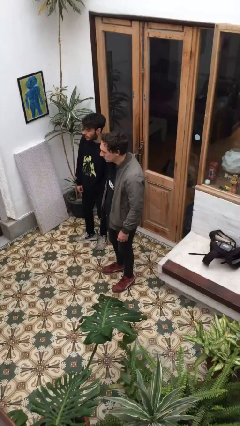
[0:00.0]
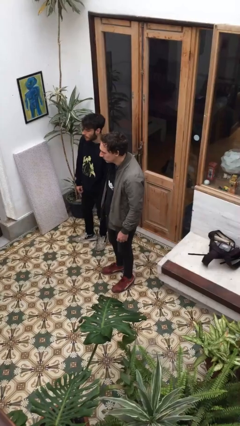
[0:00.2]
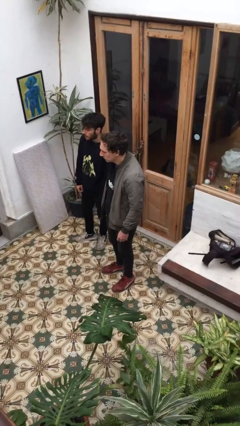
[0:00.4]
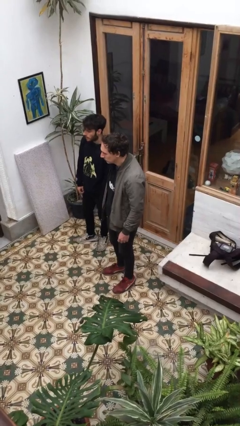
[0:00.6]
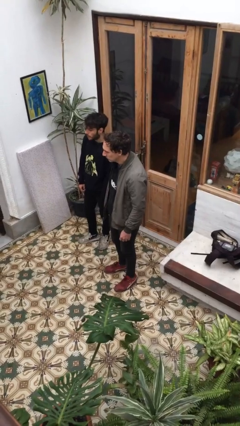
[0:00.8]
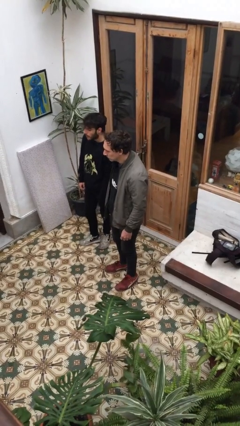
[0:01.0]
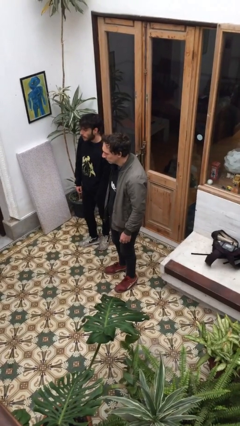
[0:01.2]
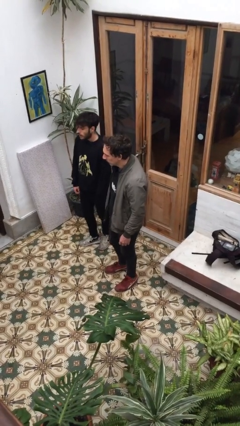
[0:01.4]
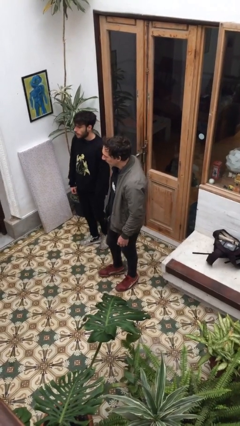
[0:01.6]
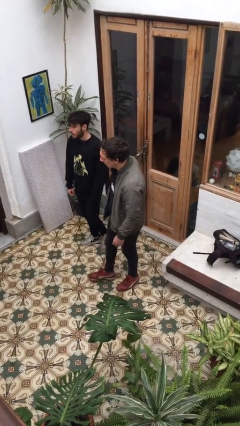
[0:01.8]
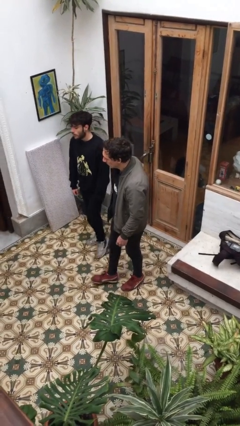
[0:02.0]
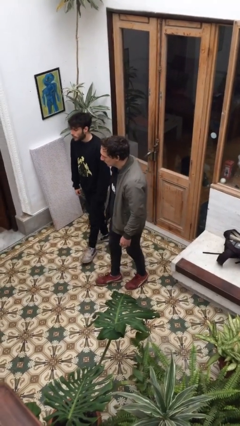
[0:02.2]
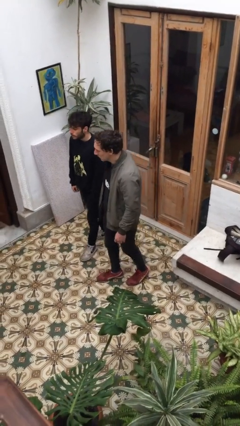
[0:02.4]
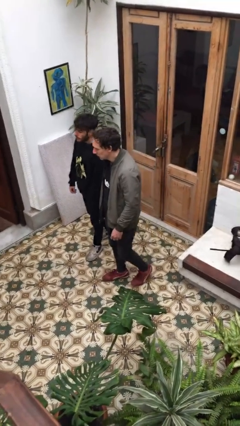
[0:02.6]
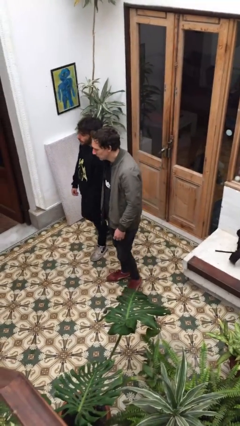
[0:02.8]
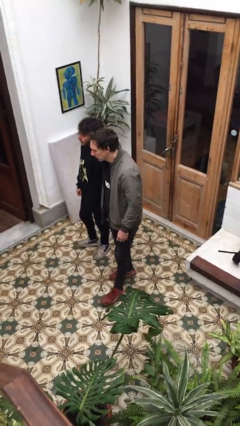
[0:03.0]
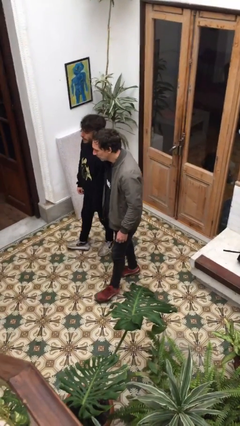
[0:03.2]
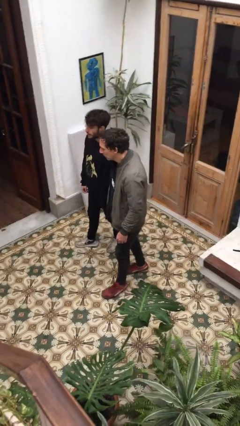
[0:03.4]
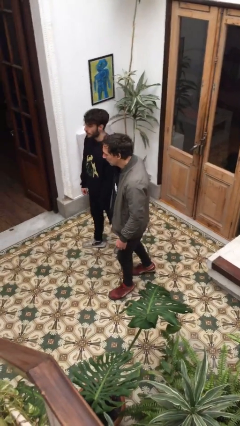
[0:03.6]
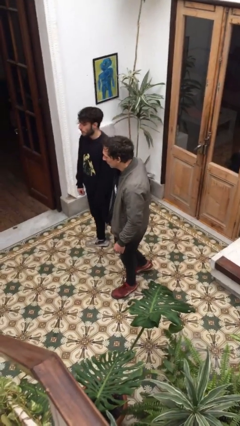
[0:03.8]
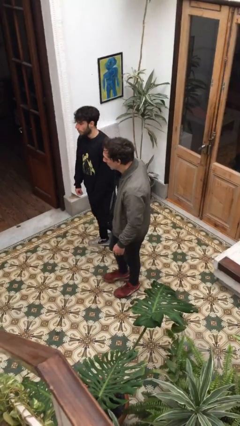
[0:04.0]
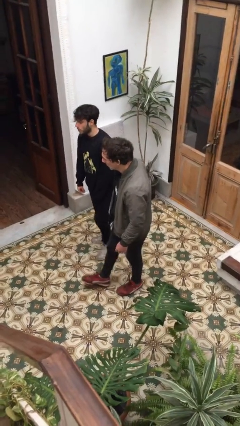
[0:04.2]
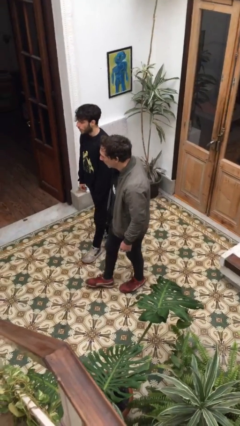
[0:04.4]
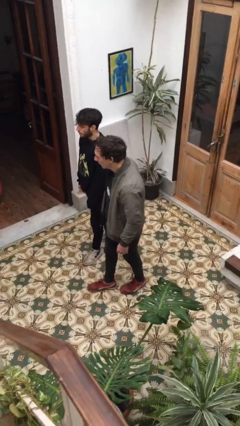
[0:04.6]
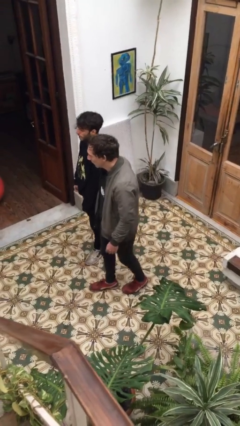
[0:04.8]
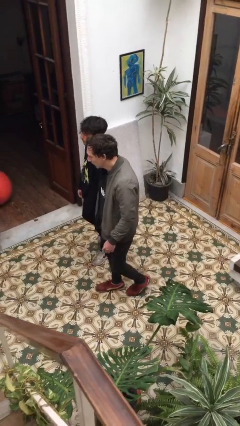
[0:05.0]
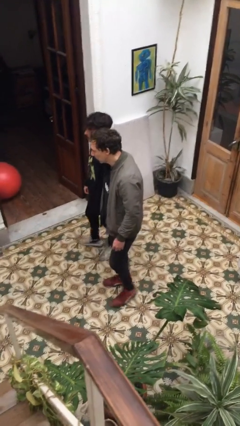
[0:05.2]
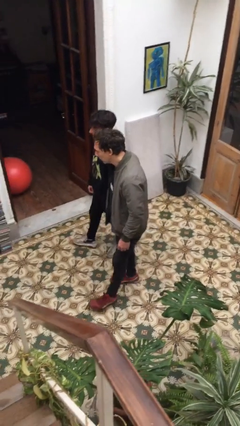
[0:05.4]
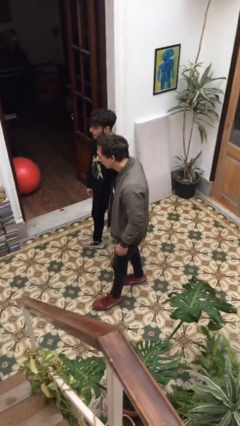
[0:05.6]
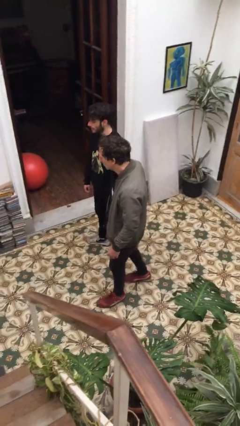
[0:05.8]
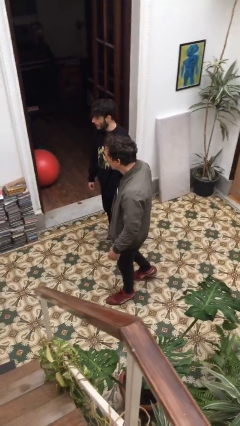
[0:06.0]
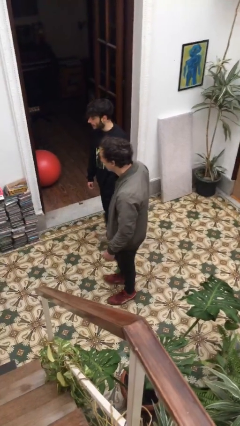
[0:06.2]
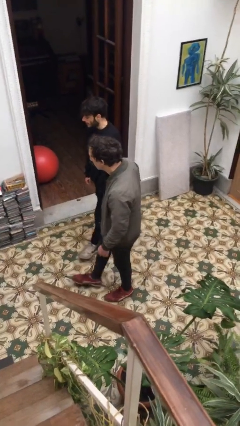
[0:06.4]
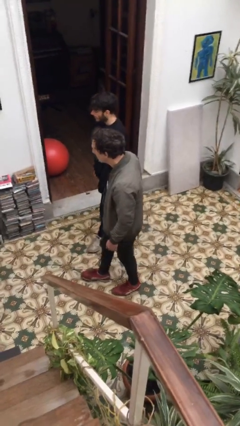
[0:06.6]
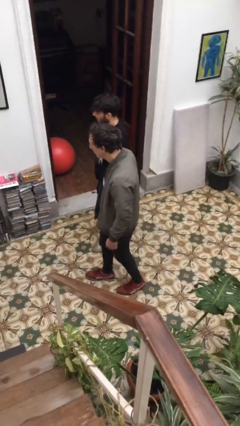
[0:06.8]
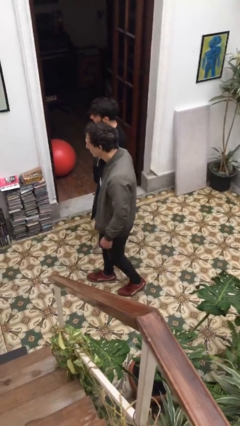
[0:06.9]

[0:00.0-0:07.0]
person talks to person

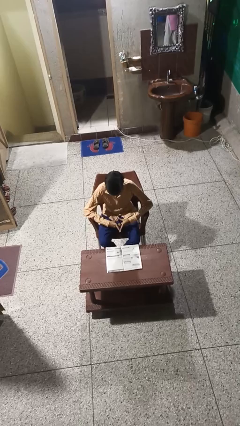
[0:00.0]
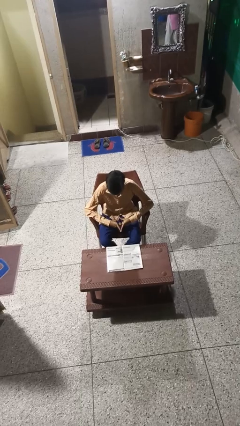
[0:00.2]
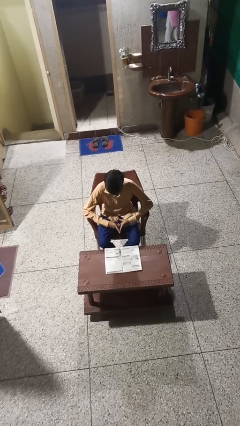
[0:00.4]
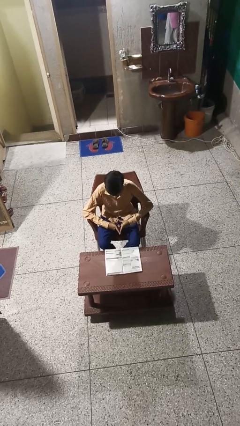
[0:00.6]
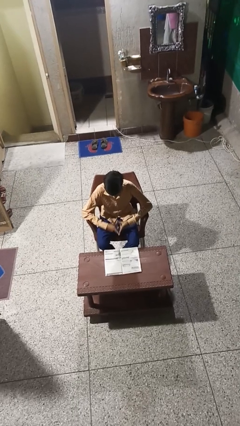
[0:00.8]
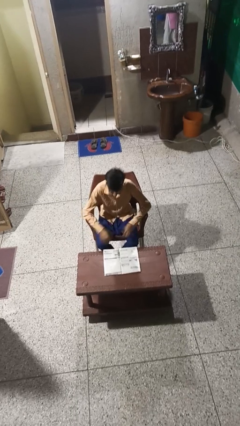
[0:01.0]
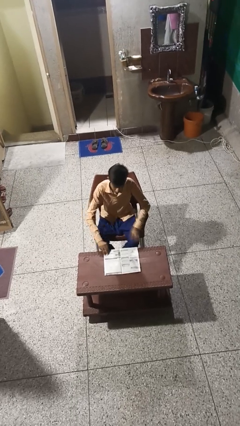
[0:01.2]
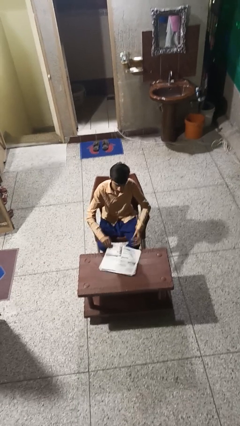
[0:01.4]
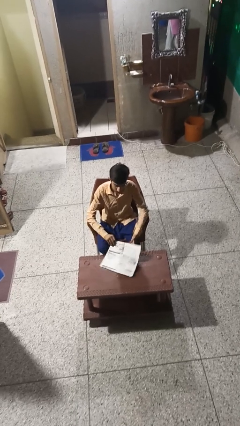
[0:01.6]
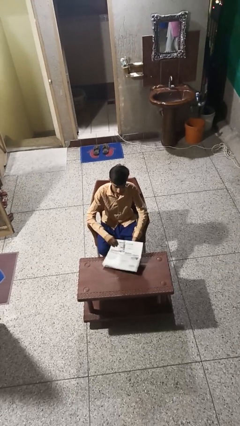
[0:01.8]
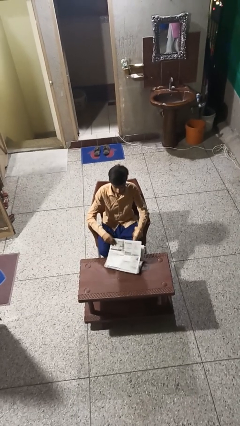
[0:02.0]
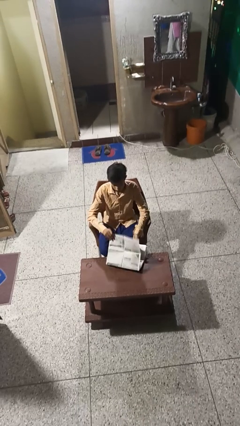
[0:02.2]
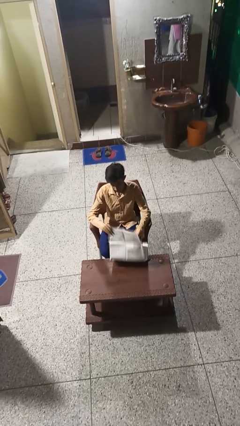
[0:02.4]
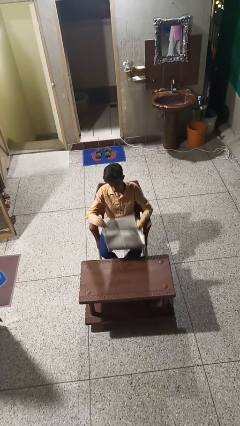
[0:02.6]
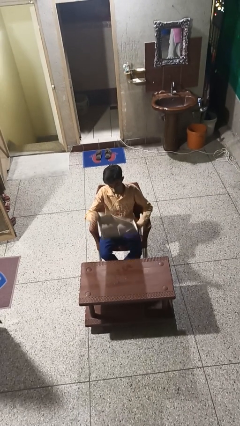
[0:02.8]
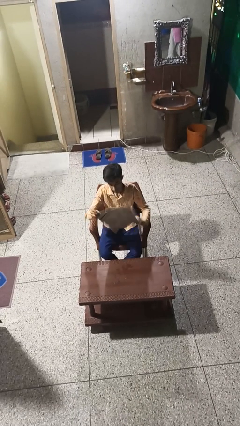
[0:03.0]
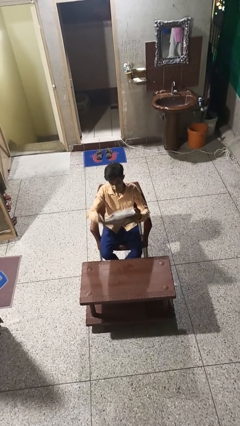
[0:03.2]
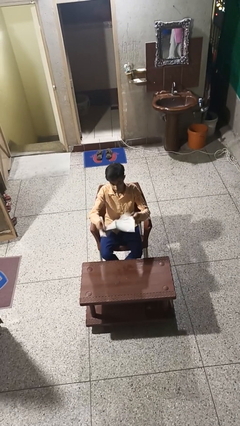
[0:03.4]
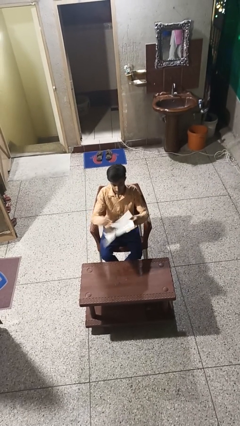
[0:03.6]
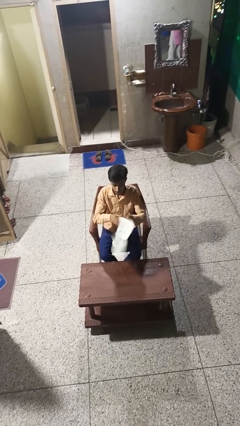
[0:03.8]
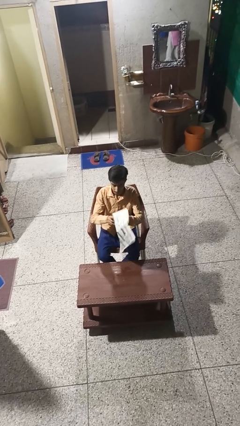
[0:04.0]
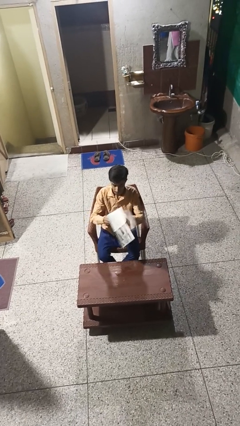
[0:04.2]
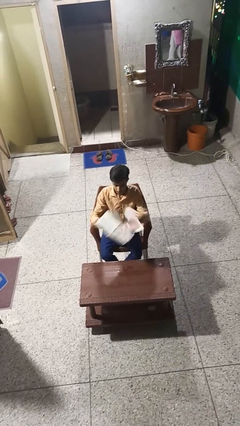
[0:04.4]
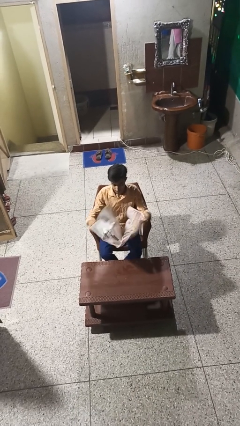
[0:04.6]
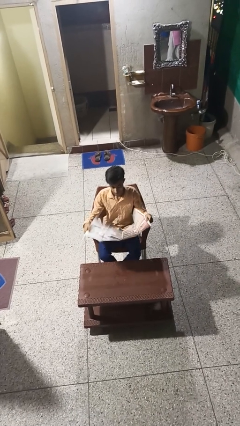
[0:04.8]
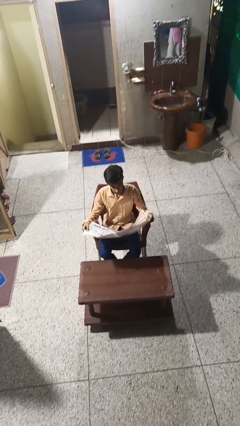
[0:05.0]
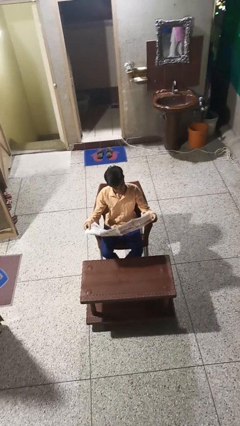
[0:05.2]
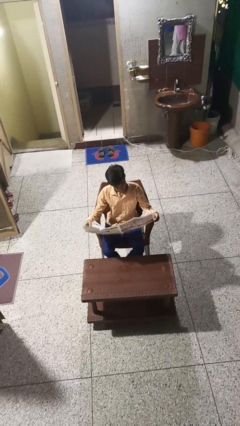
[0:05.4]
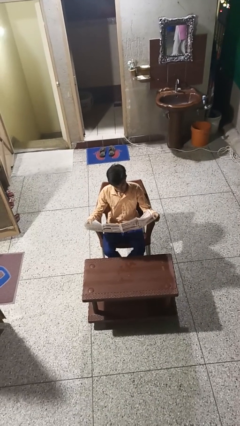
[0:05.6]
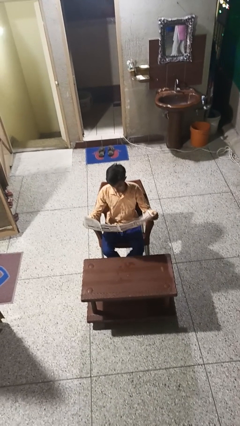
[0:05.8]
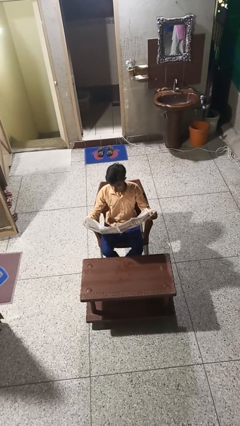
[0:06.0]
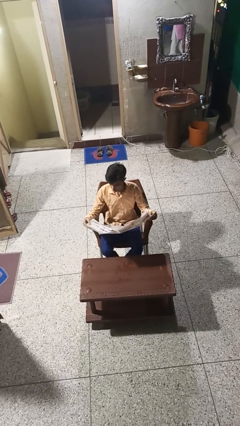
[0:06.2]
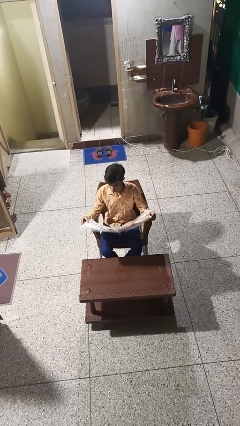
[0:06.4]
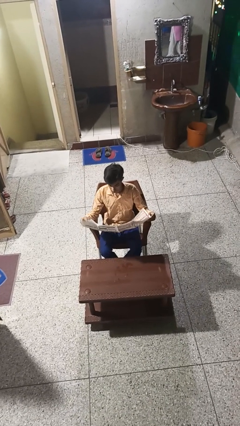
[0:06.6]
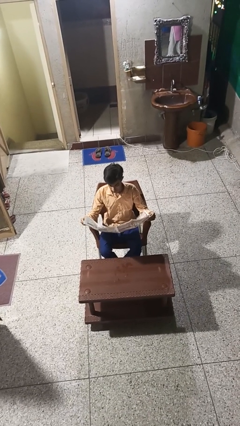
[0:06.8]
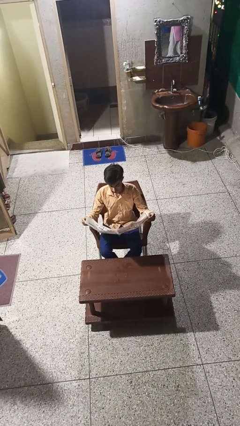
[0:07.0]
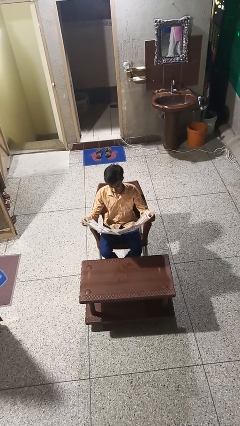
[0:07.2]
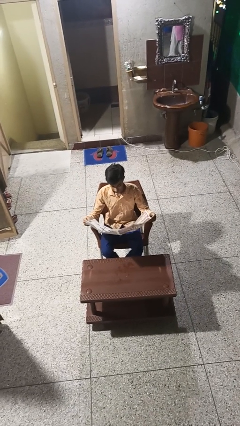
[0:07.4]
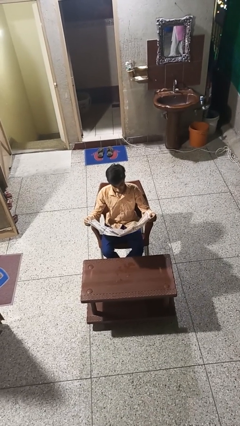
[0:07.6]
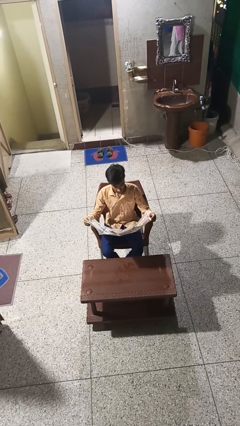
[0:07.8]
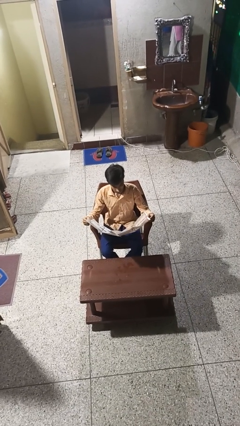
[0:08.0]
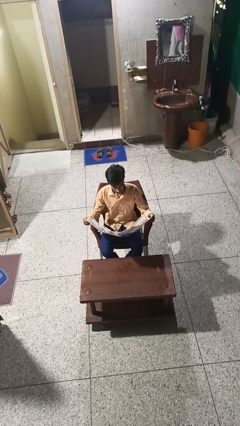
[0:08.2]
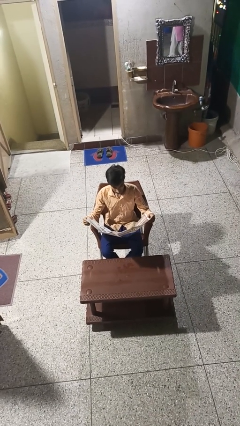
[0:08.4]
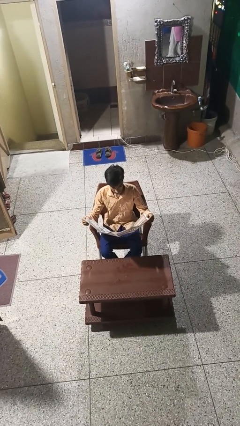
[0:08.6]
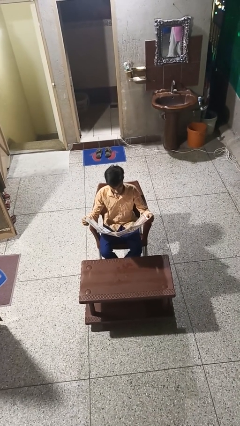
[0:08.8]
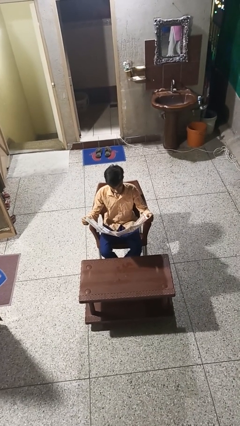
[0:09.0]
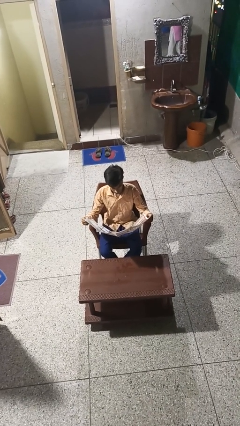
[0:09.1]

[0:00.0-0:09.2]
person reads newspaper

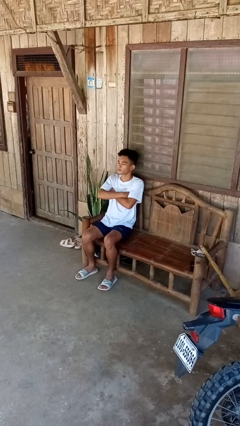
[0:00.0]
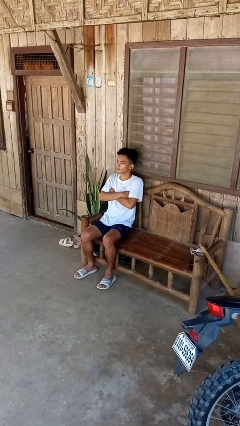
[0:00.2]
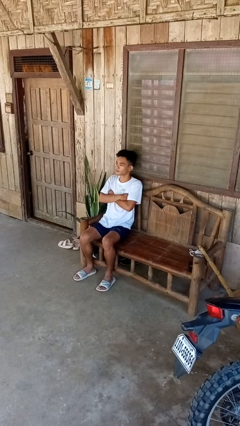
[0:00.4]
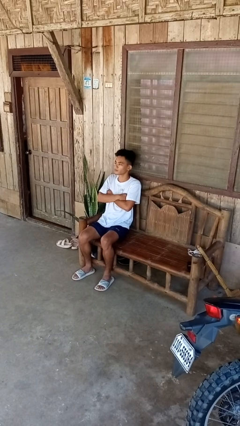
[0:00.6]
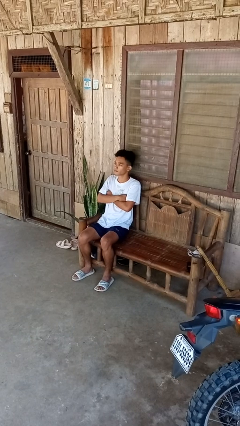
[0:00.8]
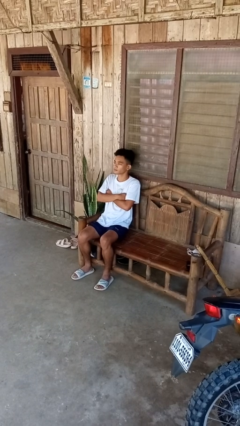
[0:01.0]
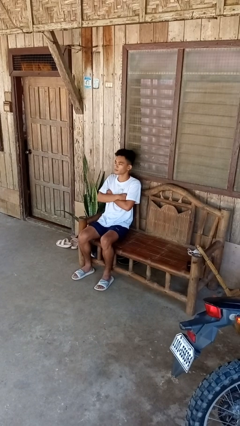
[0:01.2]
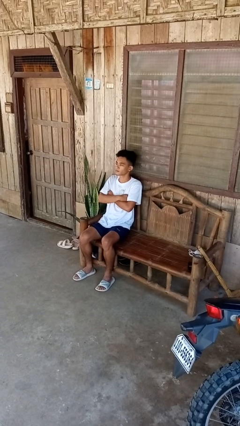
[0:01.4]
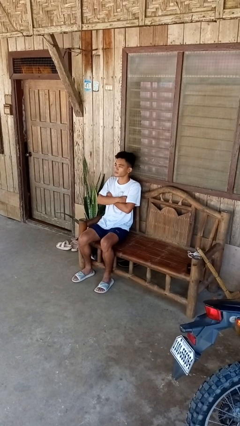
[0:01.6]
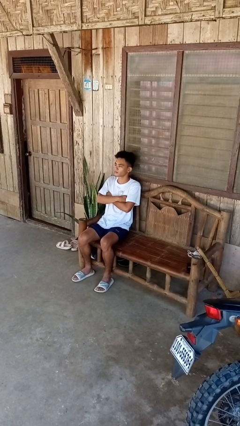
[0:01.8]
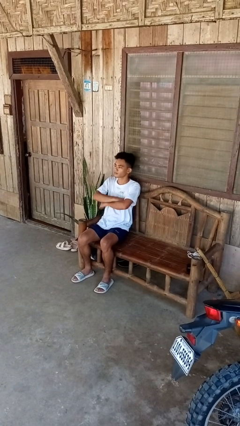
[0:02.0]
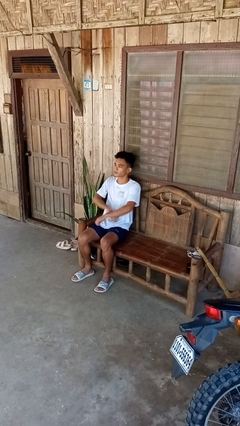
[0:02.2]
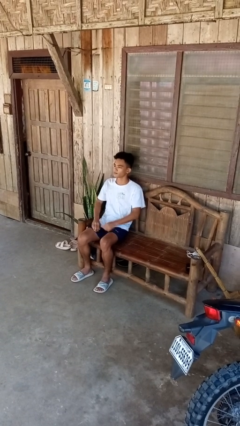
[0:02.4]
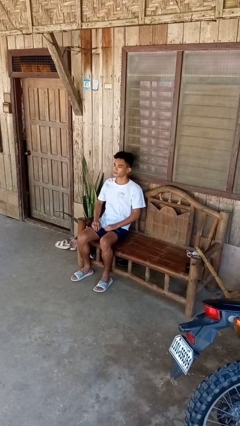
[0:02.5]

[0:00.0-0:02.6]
person crosses arms
